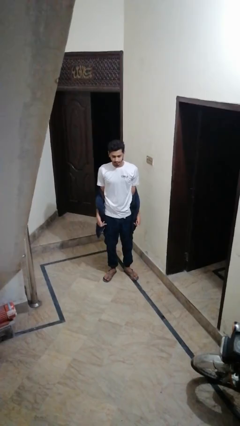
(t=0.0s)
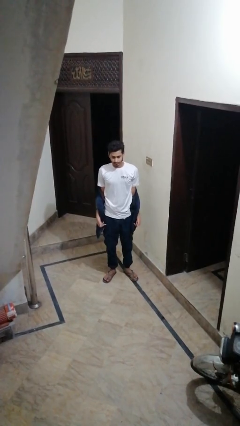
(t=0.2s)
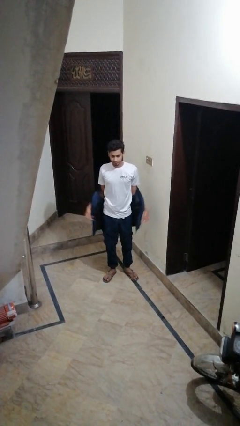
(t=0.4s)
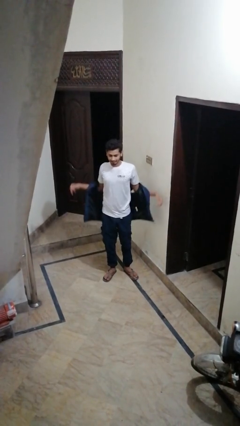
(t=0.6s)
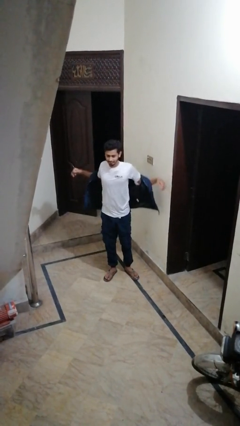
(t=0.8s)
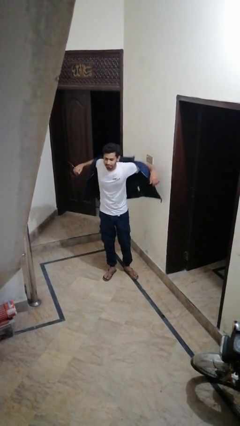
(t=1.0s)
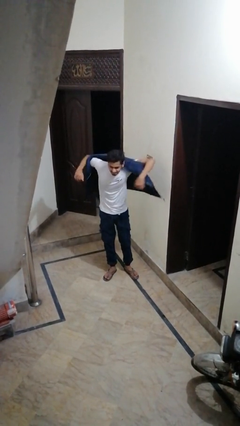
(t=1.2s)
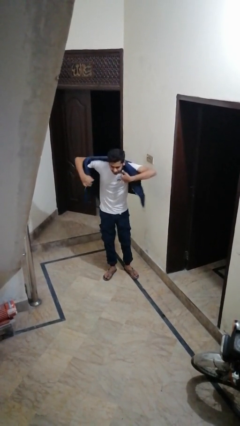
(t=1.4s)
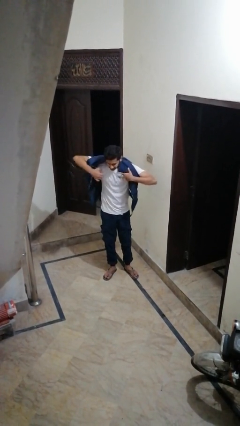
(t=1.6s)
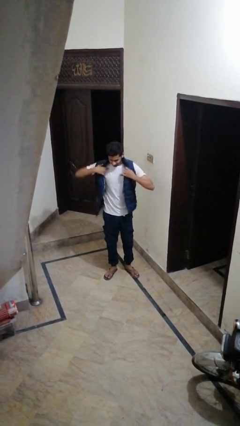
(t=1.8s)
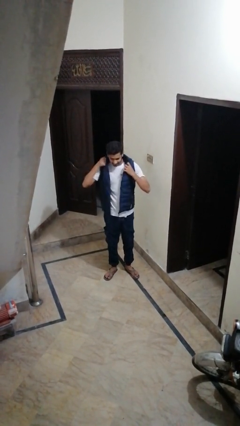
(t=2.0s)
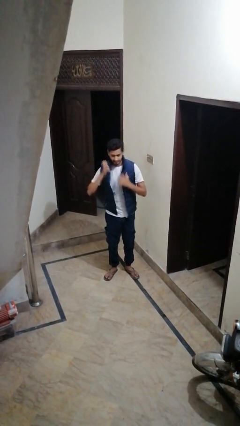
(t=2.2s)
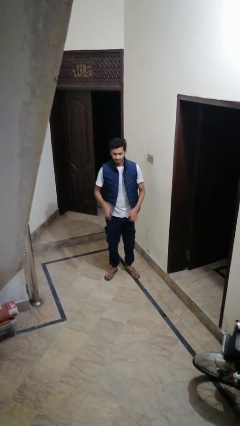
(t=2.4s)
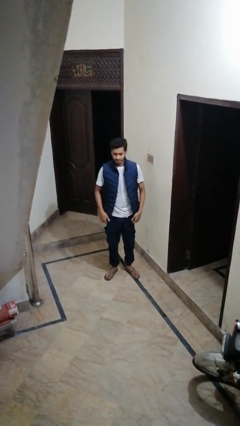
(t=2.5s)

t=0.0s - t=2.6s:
person puts on jacket

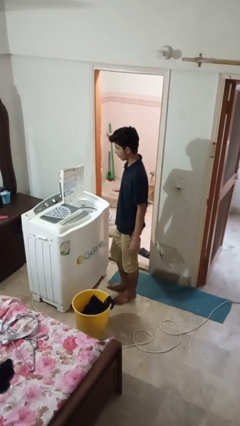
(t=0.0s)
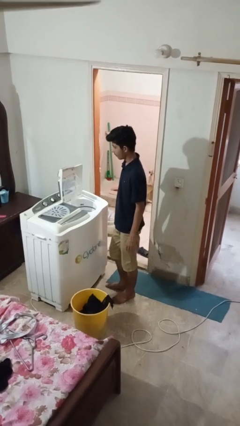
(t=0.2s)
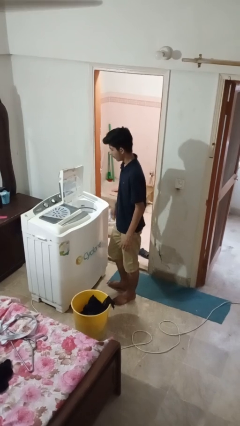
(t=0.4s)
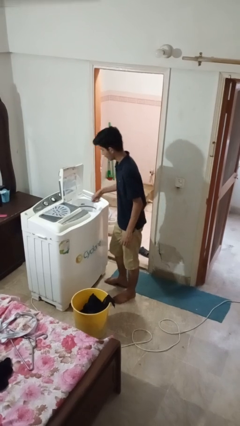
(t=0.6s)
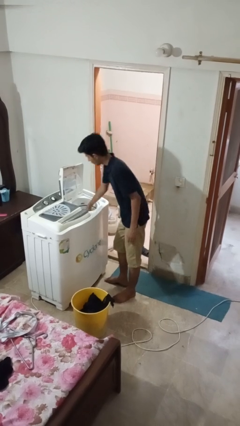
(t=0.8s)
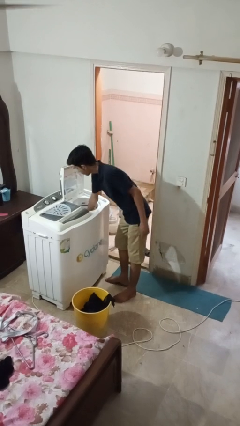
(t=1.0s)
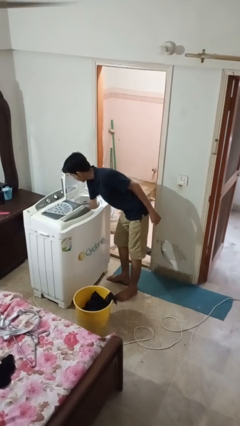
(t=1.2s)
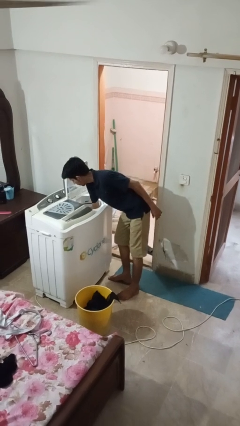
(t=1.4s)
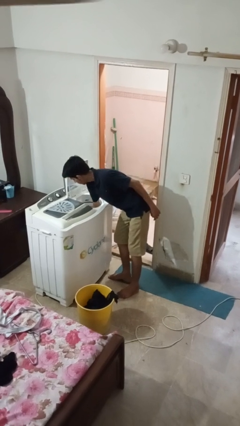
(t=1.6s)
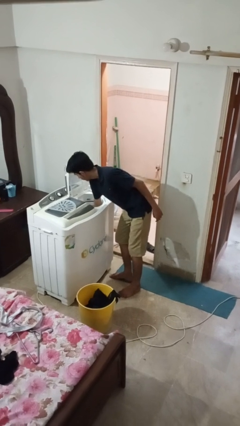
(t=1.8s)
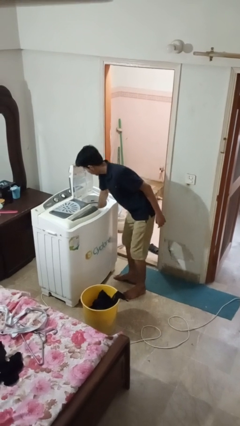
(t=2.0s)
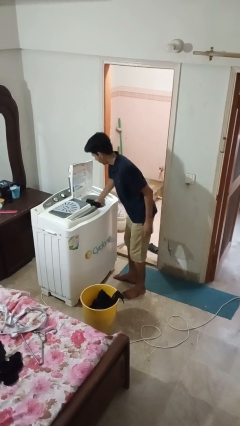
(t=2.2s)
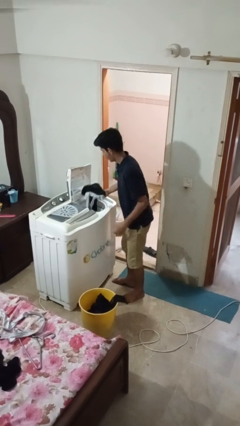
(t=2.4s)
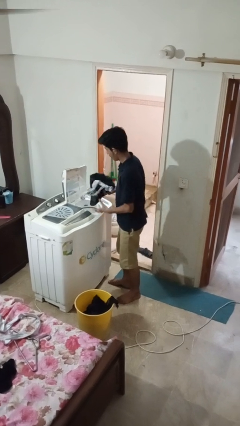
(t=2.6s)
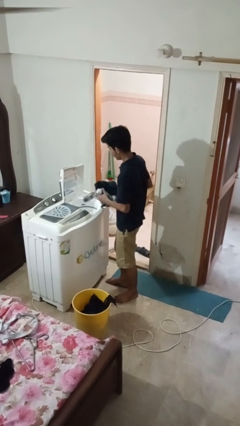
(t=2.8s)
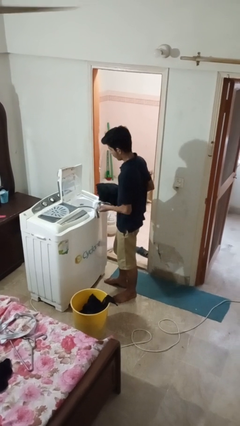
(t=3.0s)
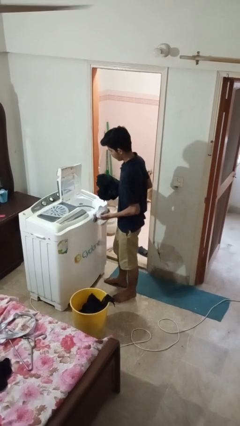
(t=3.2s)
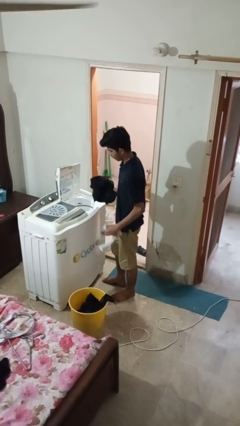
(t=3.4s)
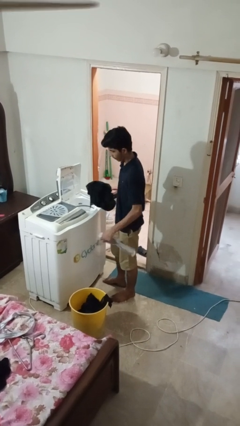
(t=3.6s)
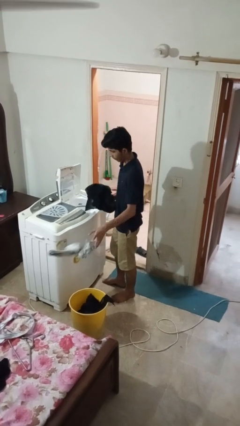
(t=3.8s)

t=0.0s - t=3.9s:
person unloads dryer

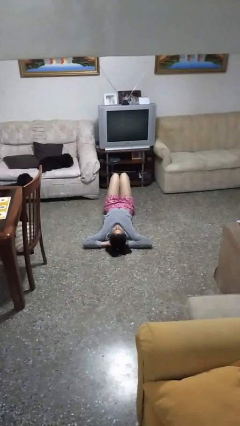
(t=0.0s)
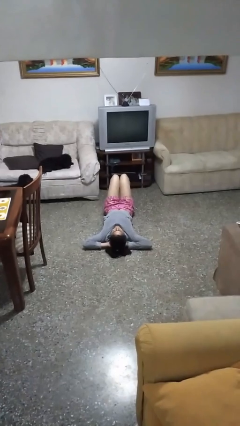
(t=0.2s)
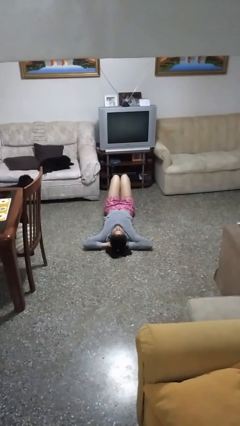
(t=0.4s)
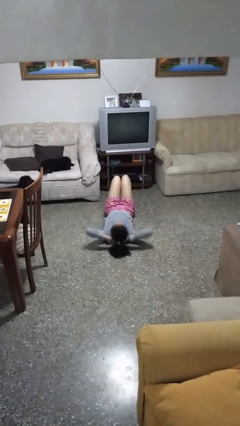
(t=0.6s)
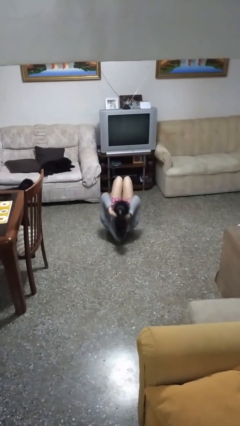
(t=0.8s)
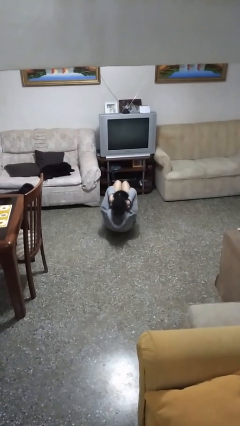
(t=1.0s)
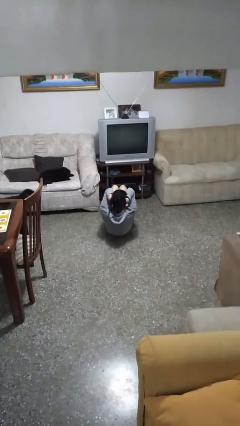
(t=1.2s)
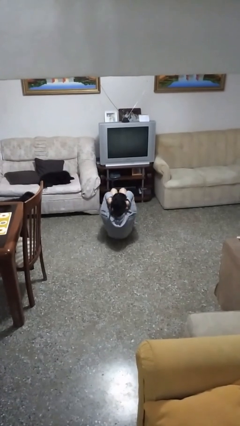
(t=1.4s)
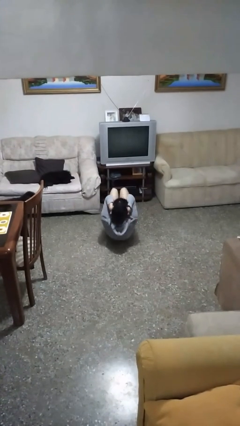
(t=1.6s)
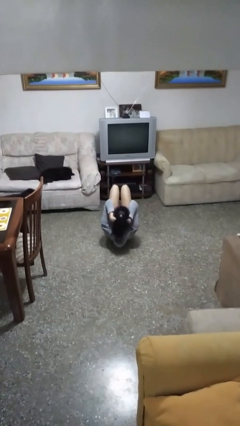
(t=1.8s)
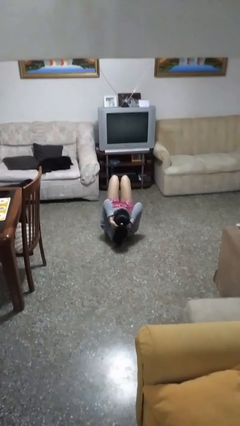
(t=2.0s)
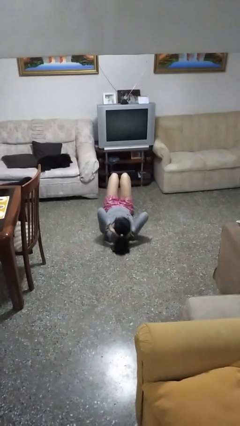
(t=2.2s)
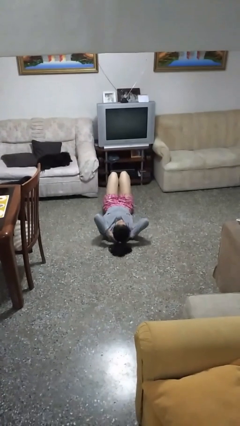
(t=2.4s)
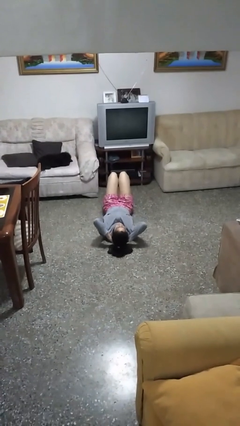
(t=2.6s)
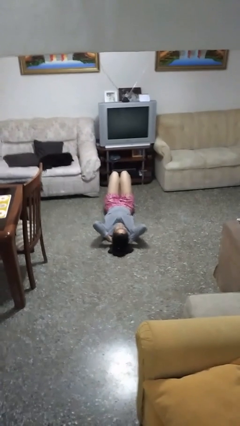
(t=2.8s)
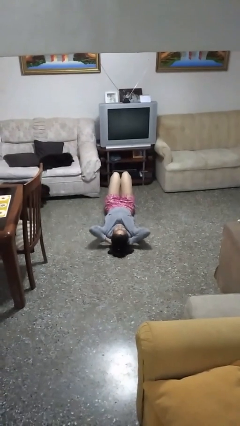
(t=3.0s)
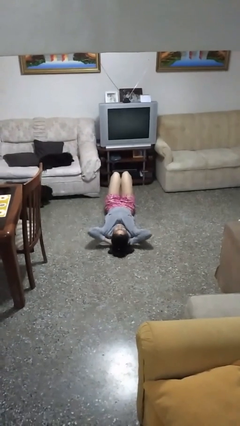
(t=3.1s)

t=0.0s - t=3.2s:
person exercises with situp

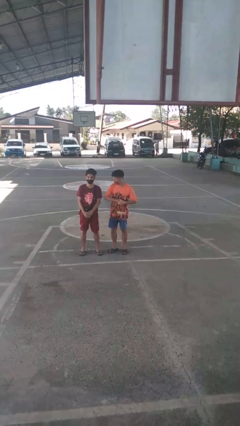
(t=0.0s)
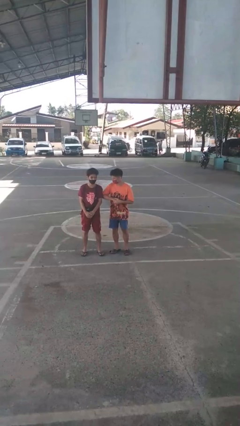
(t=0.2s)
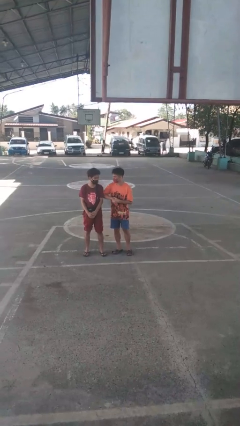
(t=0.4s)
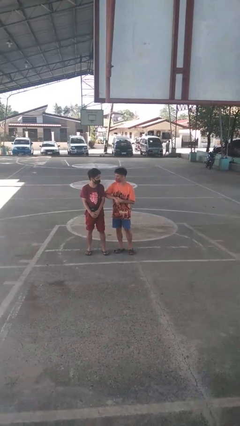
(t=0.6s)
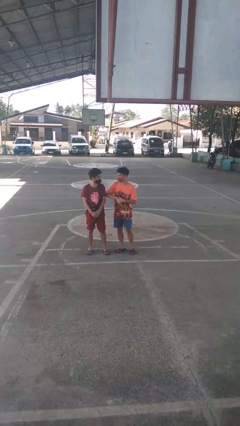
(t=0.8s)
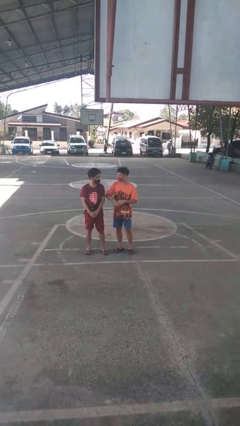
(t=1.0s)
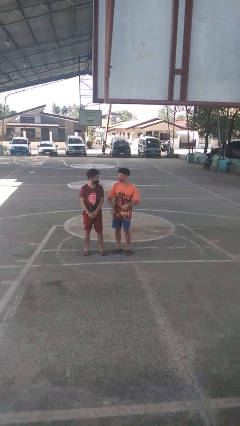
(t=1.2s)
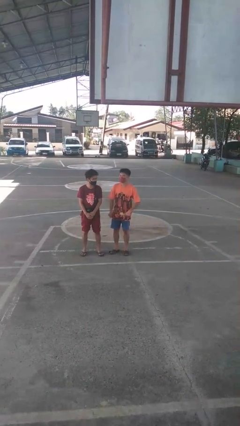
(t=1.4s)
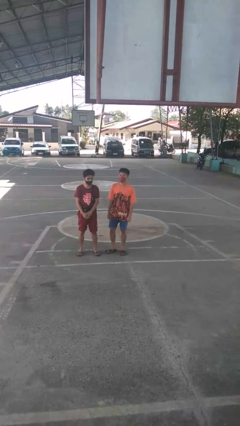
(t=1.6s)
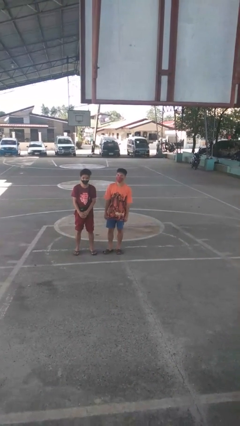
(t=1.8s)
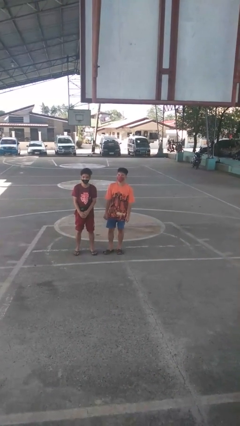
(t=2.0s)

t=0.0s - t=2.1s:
person nudges person with elbow

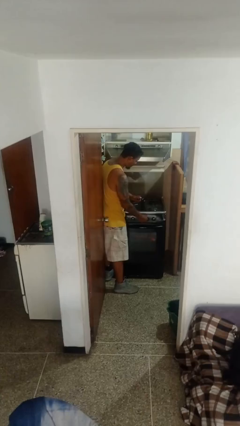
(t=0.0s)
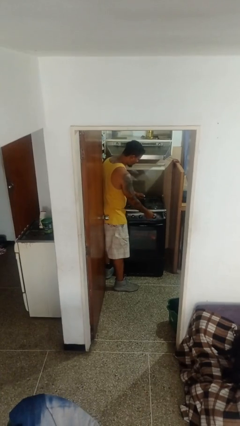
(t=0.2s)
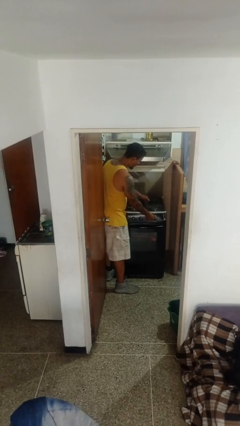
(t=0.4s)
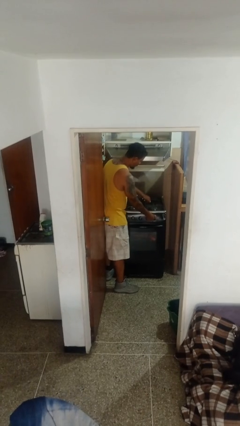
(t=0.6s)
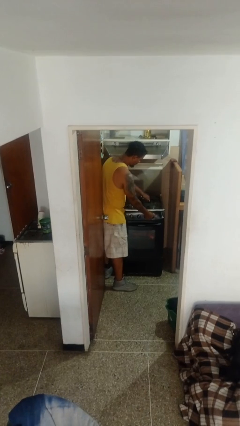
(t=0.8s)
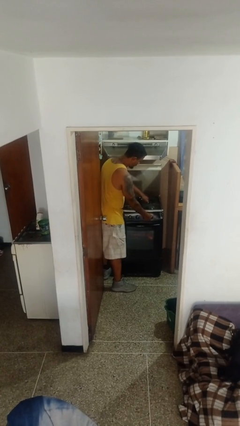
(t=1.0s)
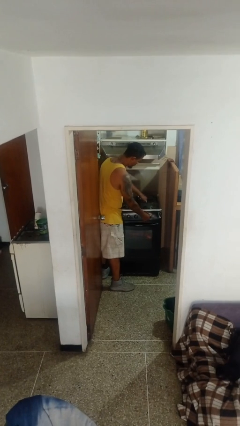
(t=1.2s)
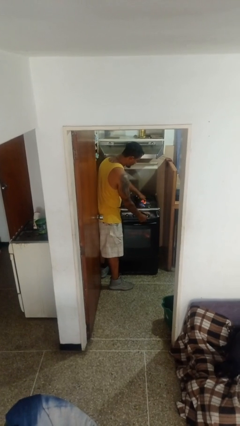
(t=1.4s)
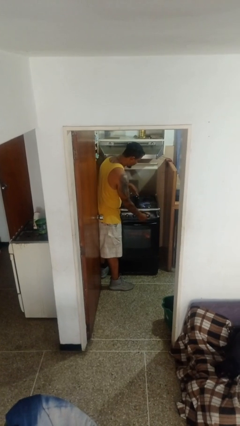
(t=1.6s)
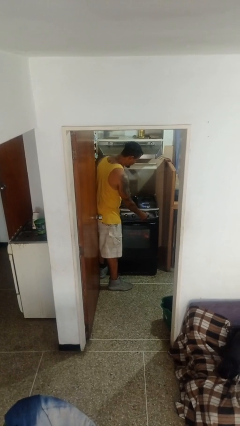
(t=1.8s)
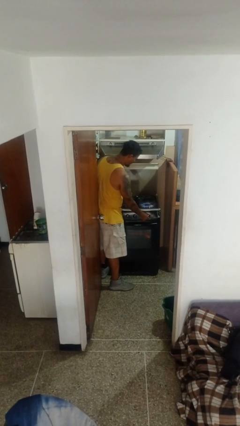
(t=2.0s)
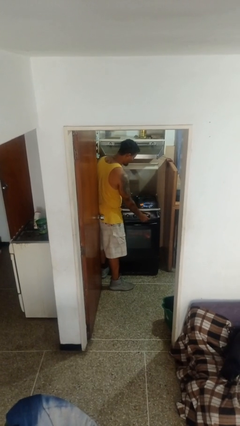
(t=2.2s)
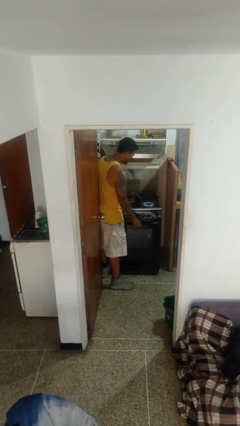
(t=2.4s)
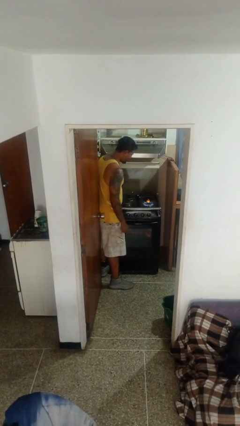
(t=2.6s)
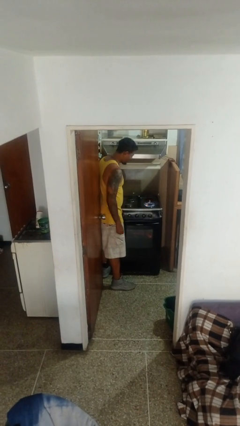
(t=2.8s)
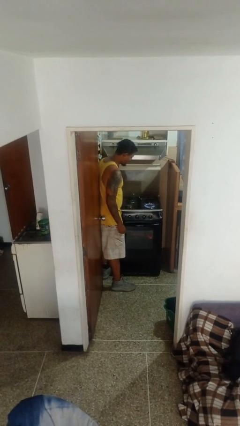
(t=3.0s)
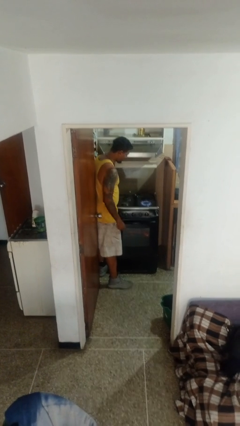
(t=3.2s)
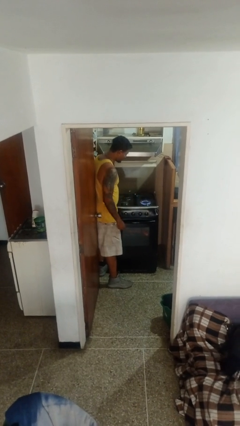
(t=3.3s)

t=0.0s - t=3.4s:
person turns on stovetop

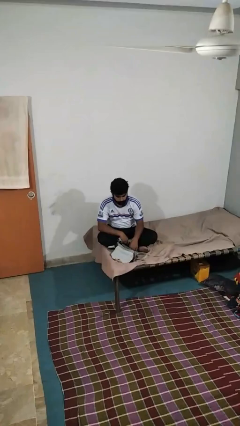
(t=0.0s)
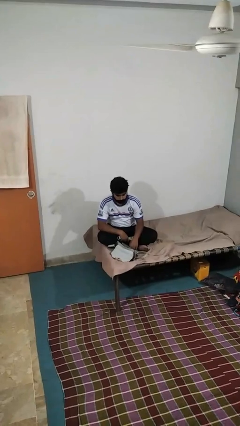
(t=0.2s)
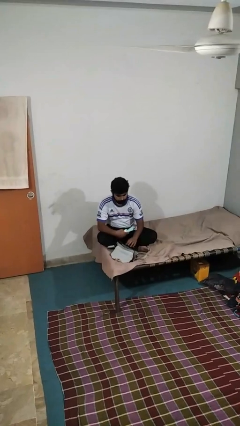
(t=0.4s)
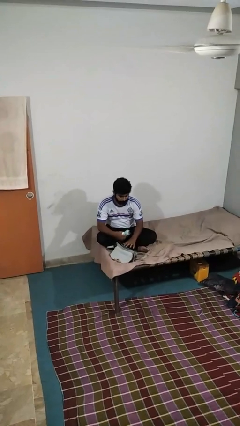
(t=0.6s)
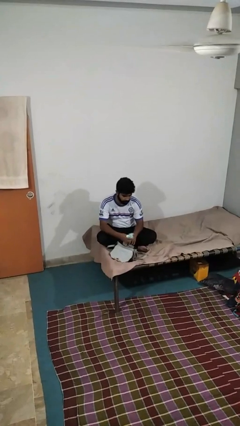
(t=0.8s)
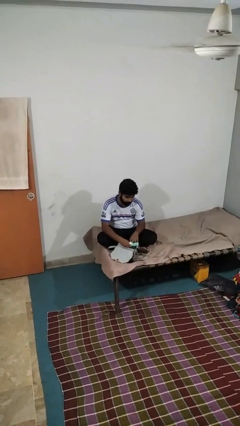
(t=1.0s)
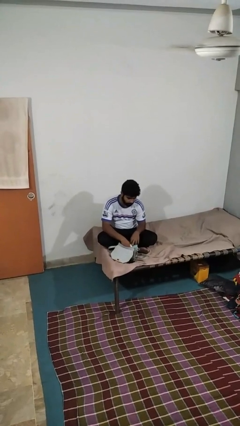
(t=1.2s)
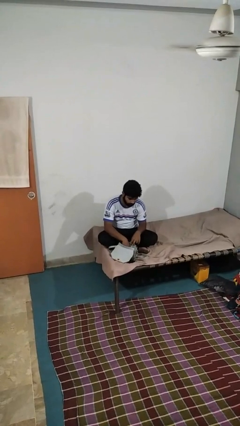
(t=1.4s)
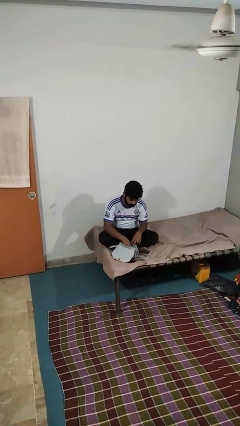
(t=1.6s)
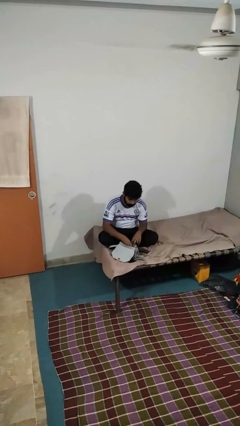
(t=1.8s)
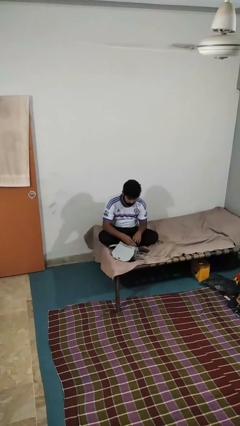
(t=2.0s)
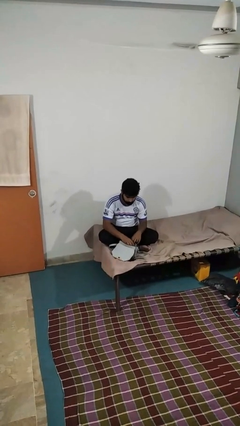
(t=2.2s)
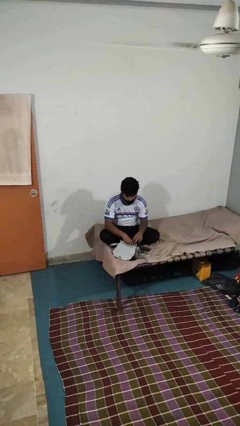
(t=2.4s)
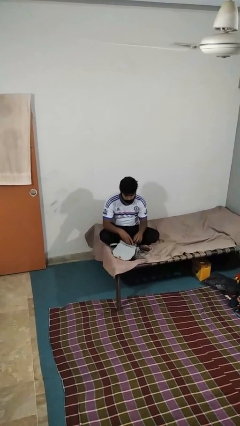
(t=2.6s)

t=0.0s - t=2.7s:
person puts object into purse
